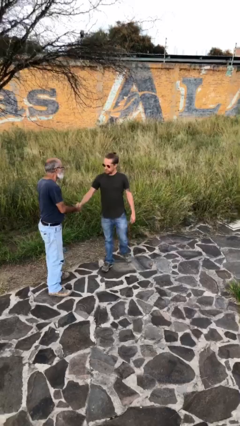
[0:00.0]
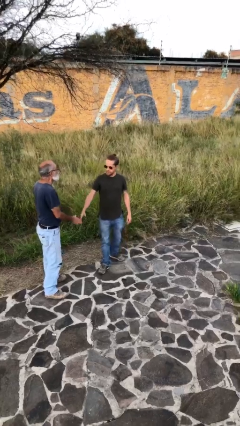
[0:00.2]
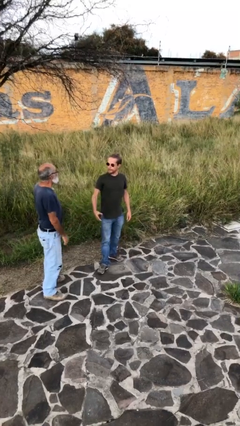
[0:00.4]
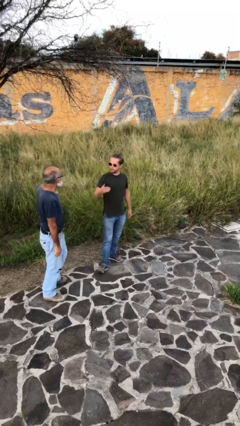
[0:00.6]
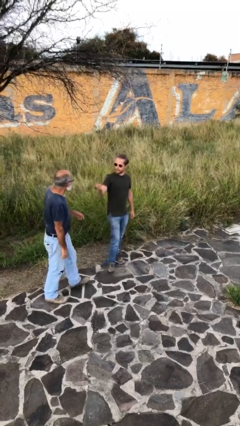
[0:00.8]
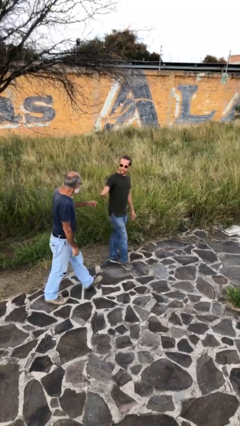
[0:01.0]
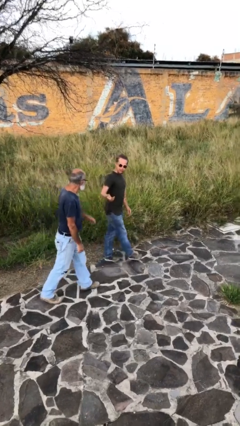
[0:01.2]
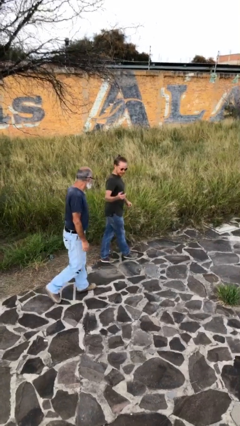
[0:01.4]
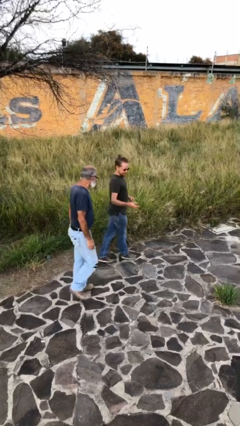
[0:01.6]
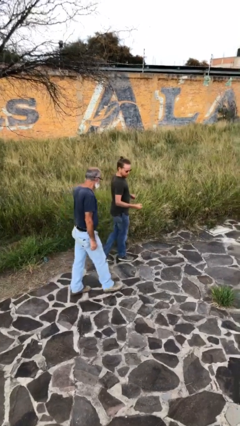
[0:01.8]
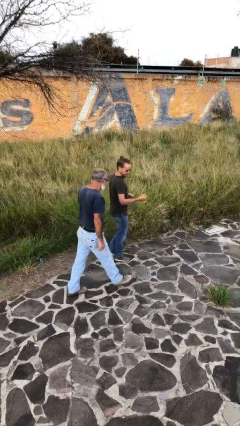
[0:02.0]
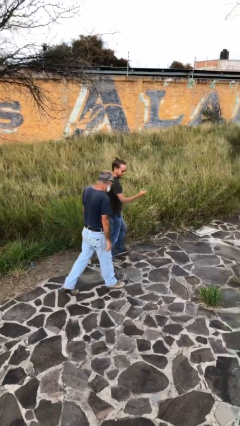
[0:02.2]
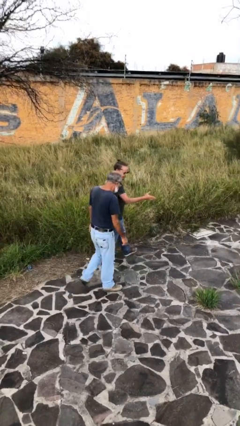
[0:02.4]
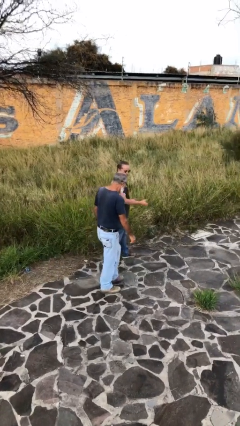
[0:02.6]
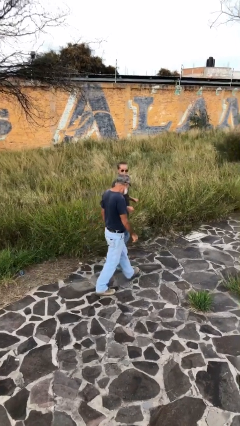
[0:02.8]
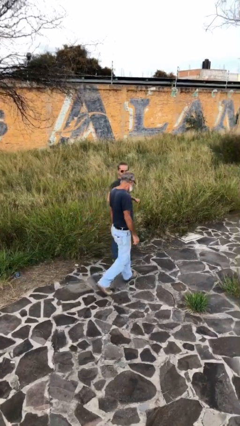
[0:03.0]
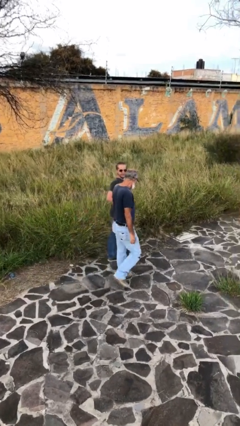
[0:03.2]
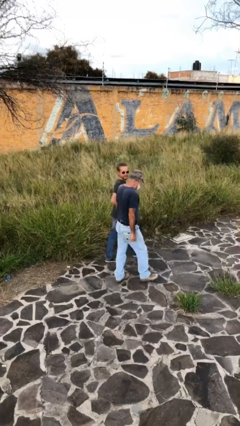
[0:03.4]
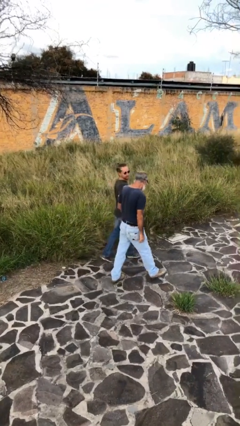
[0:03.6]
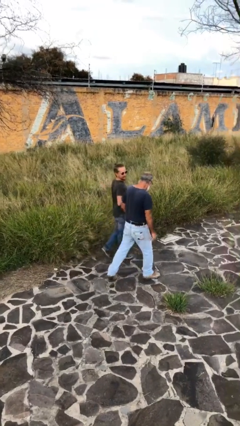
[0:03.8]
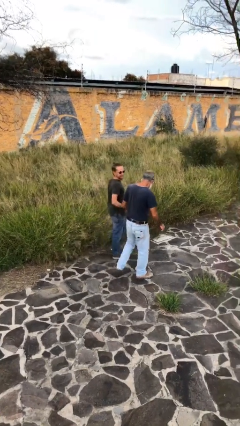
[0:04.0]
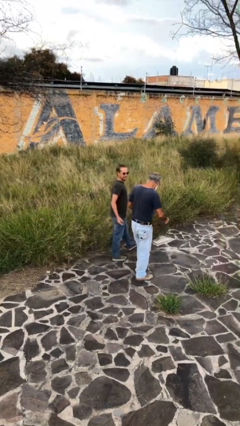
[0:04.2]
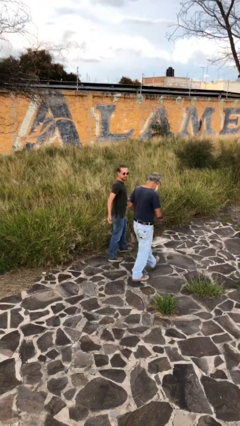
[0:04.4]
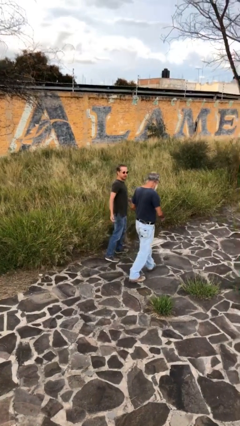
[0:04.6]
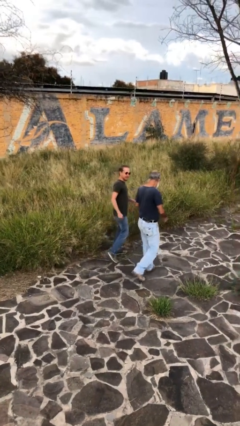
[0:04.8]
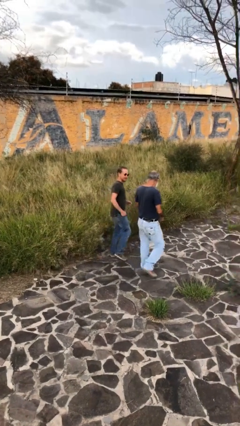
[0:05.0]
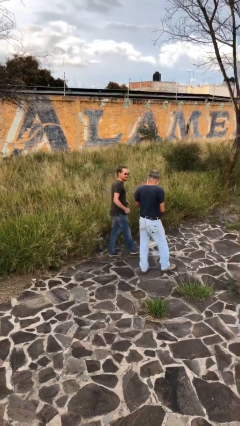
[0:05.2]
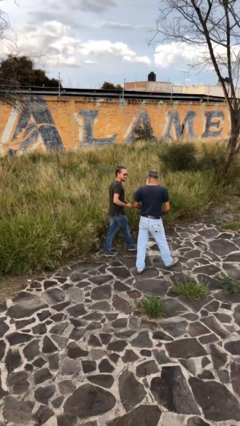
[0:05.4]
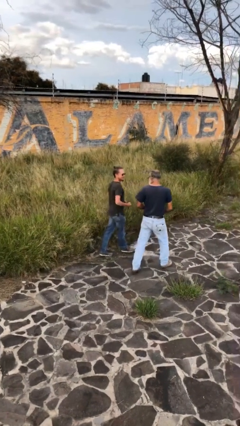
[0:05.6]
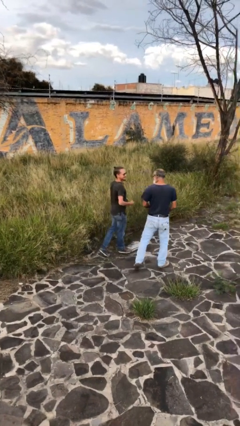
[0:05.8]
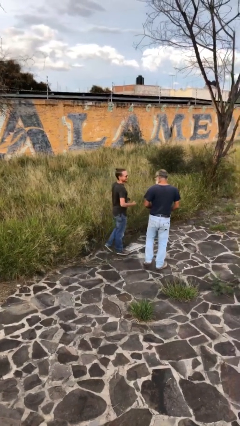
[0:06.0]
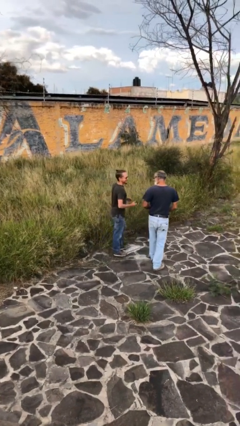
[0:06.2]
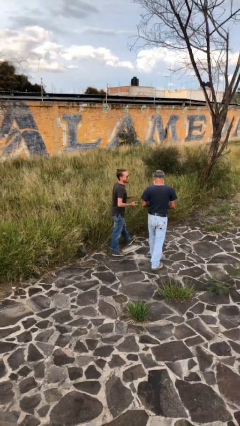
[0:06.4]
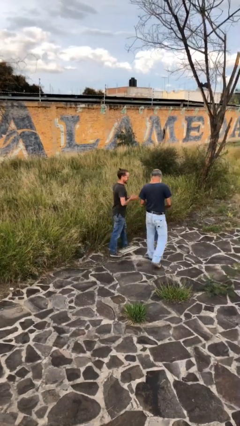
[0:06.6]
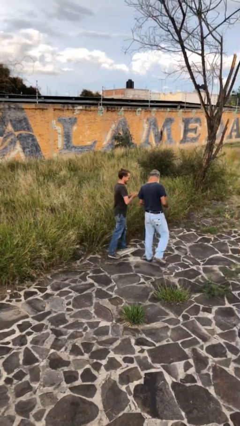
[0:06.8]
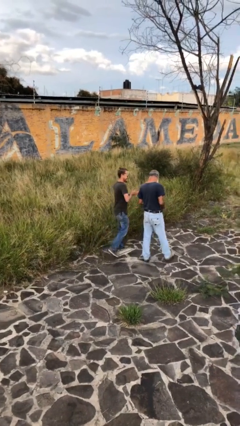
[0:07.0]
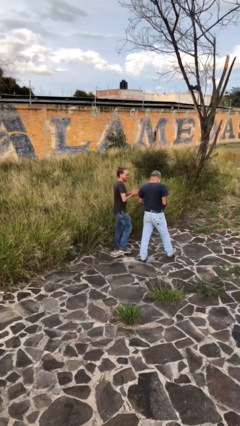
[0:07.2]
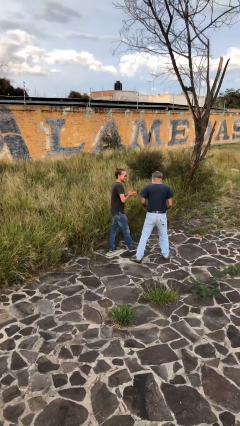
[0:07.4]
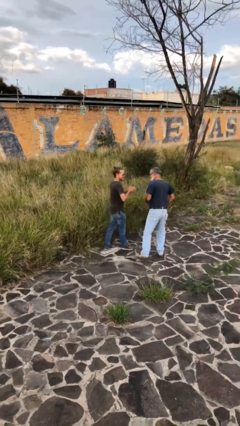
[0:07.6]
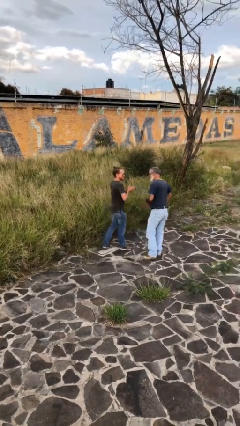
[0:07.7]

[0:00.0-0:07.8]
person talks to person

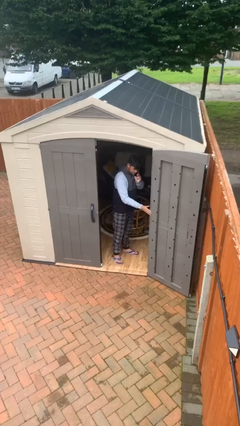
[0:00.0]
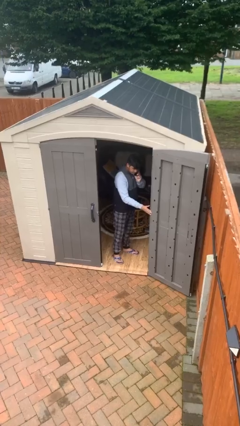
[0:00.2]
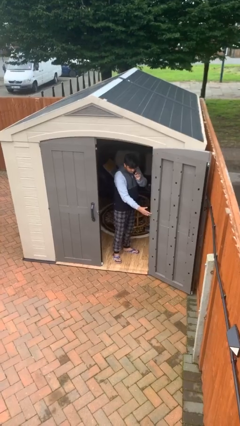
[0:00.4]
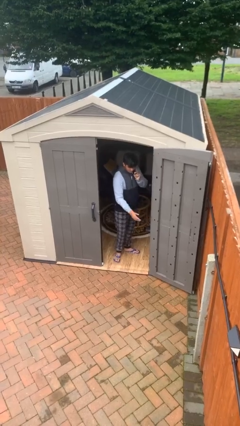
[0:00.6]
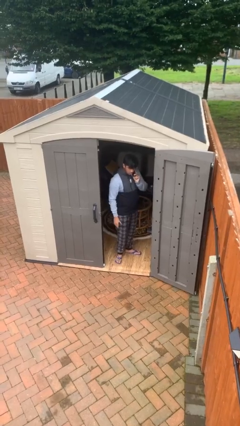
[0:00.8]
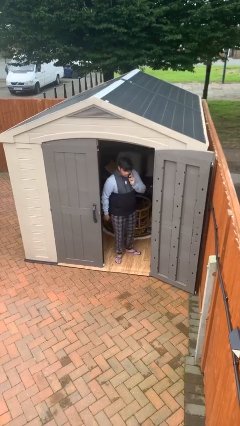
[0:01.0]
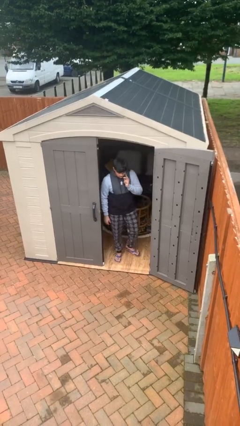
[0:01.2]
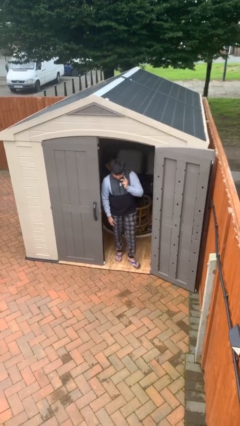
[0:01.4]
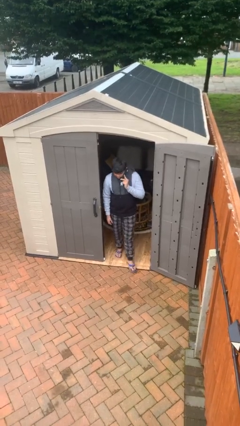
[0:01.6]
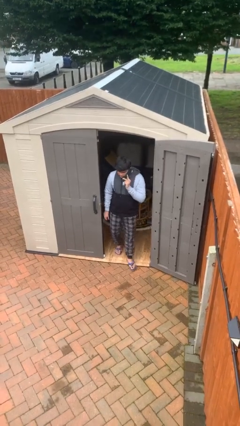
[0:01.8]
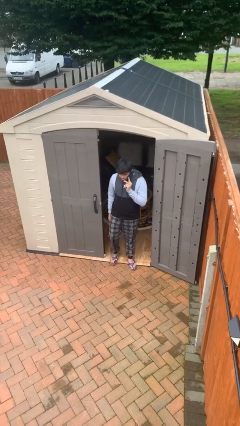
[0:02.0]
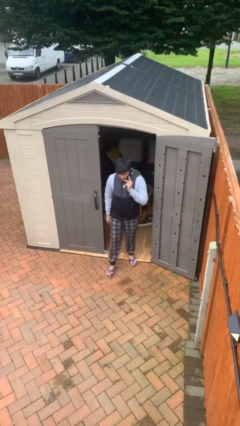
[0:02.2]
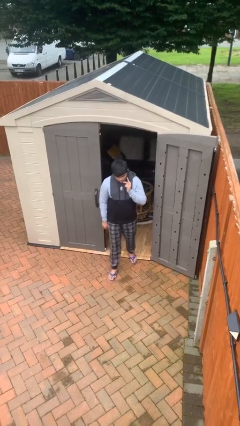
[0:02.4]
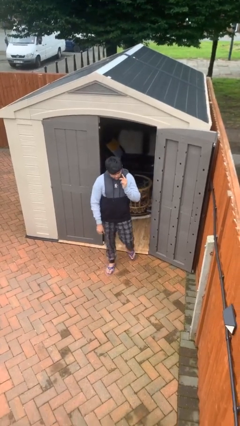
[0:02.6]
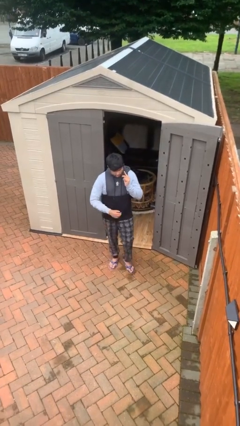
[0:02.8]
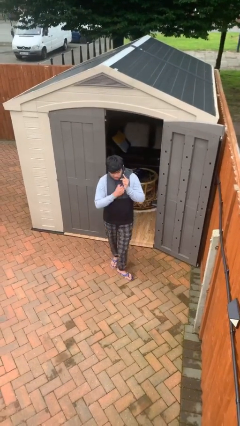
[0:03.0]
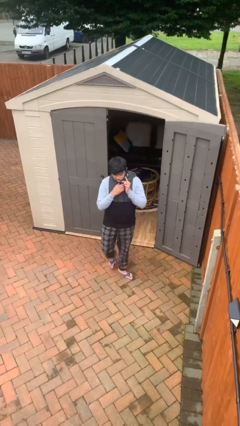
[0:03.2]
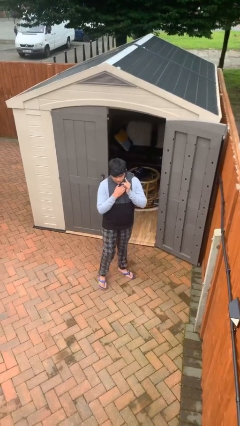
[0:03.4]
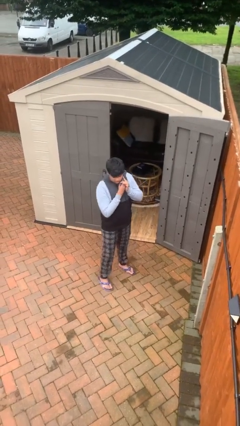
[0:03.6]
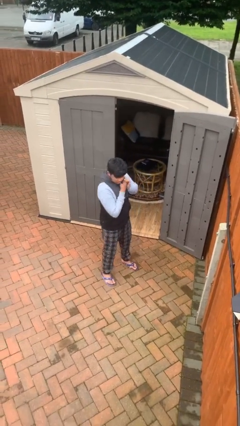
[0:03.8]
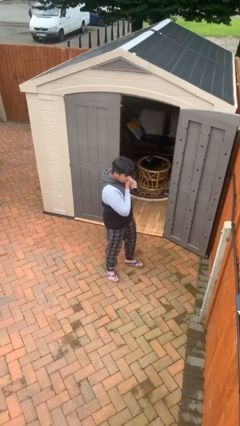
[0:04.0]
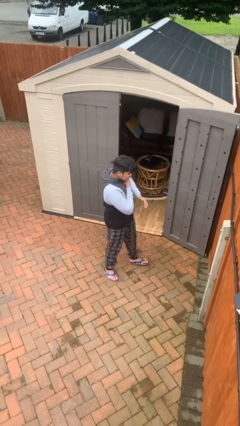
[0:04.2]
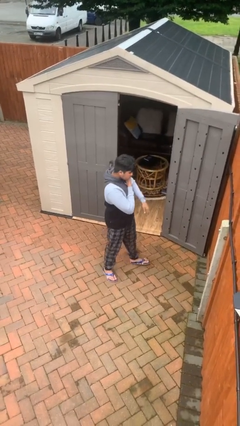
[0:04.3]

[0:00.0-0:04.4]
person enters scene through structure

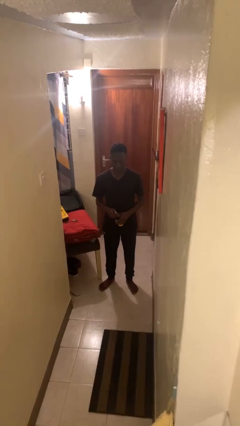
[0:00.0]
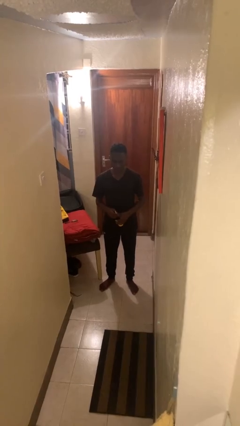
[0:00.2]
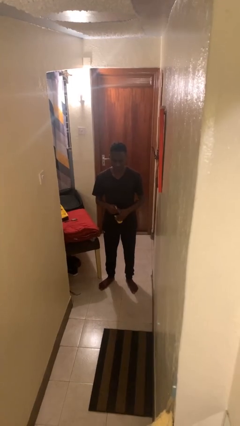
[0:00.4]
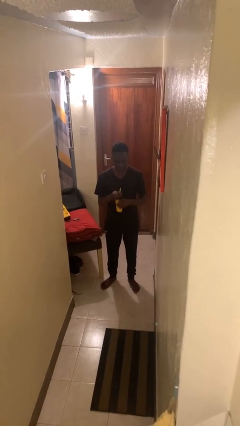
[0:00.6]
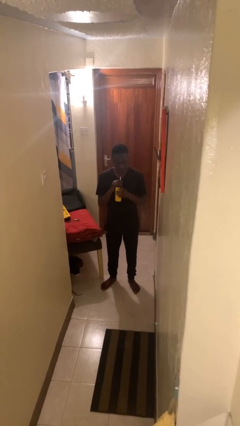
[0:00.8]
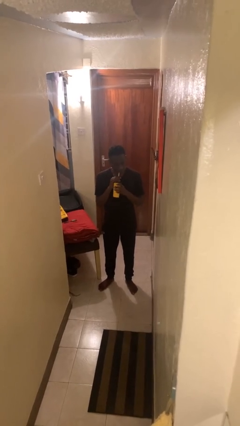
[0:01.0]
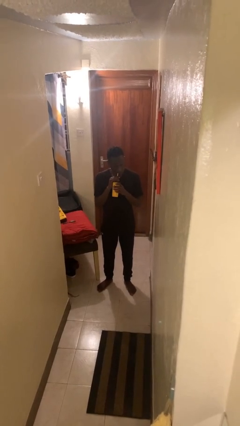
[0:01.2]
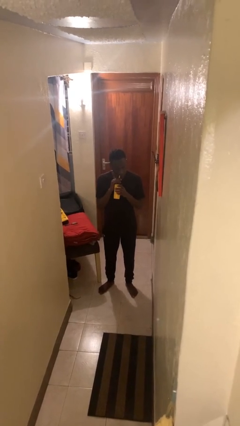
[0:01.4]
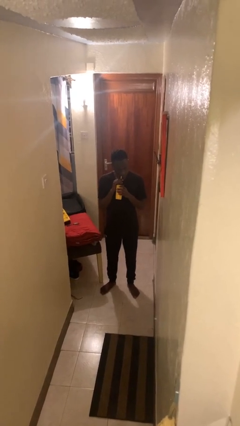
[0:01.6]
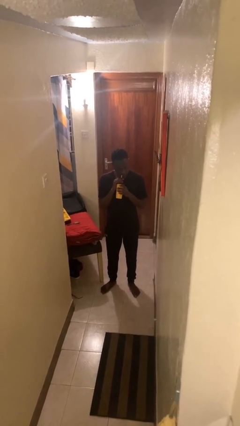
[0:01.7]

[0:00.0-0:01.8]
person drinks from straw

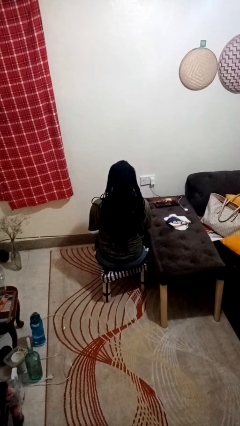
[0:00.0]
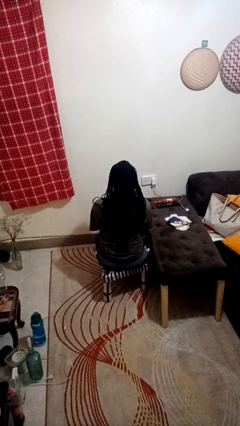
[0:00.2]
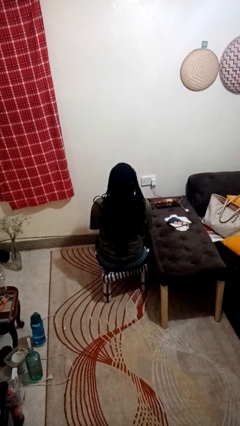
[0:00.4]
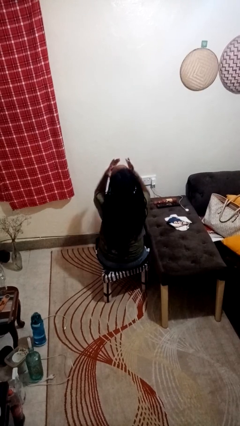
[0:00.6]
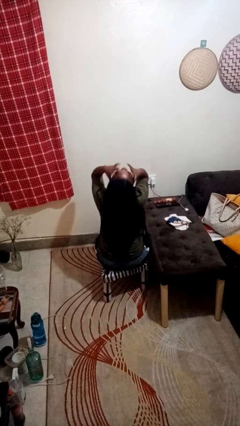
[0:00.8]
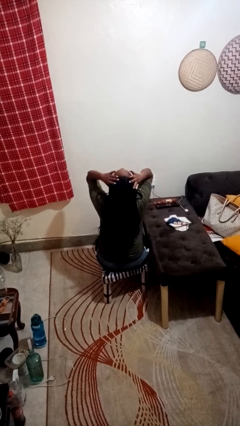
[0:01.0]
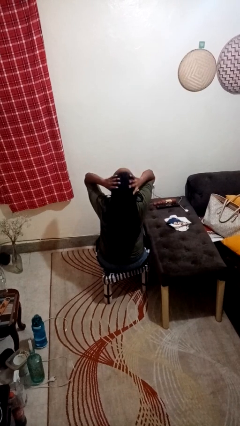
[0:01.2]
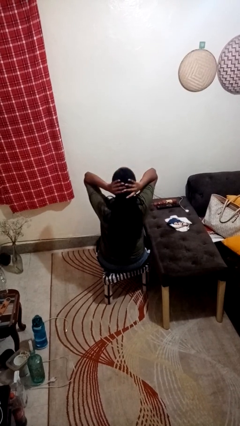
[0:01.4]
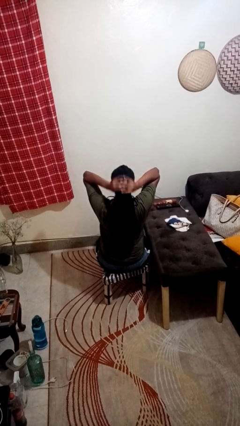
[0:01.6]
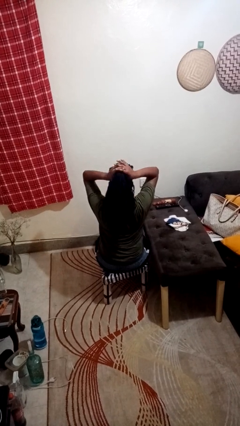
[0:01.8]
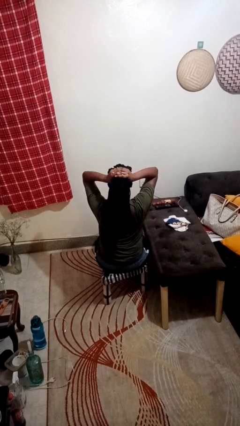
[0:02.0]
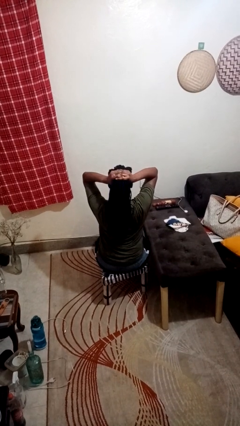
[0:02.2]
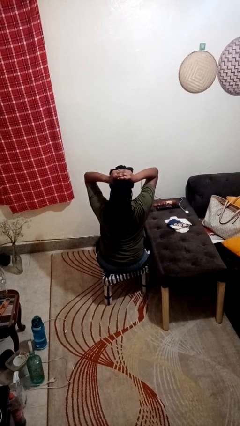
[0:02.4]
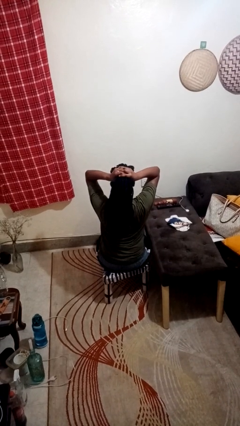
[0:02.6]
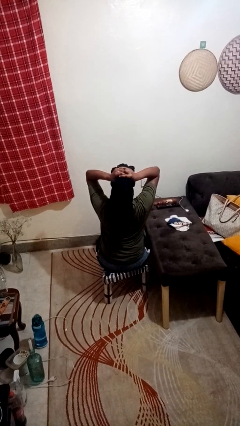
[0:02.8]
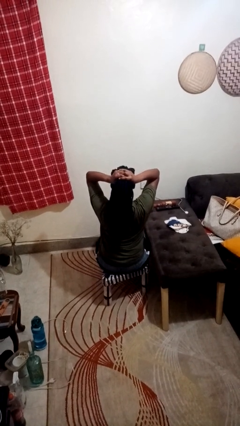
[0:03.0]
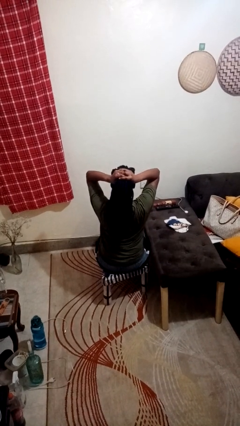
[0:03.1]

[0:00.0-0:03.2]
person puts hair in ponytail
